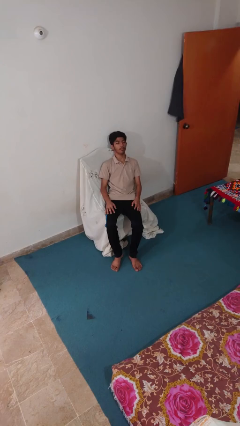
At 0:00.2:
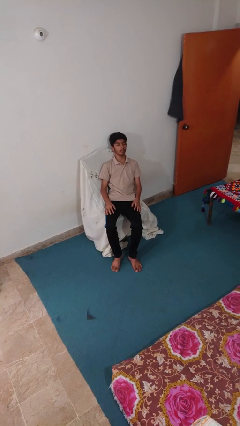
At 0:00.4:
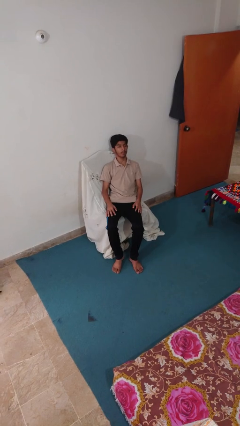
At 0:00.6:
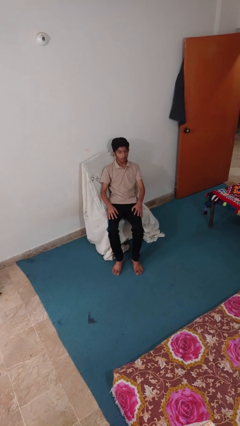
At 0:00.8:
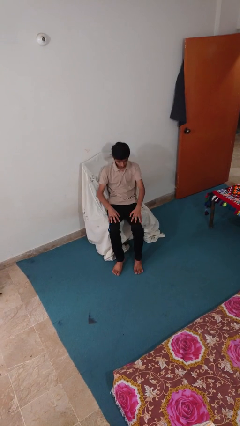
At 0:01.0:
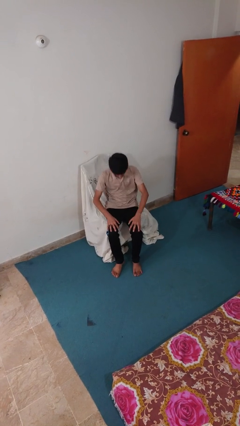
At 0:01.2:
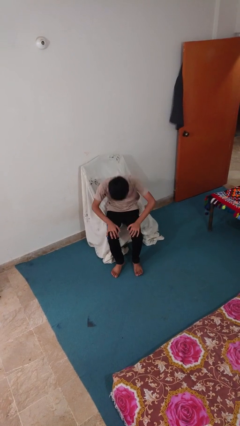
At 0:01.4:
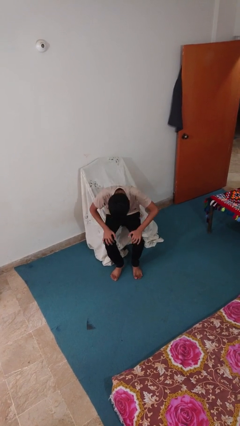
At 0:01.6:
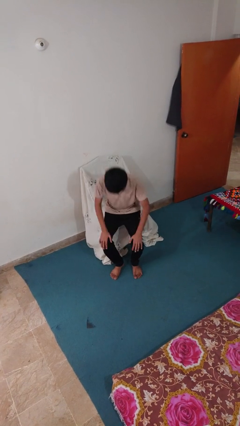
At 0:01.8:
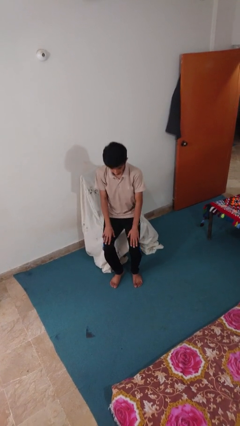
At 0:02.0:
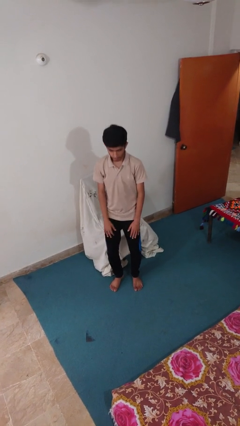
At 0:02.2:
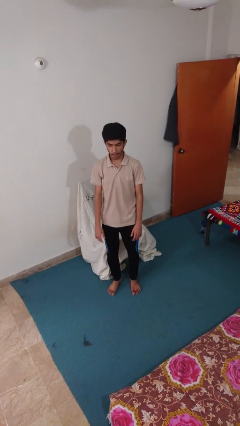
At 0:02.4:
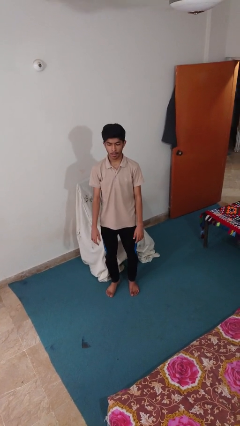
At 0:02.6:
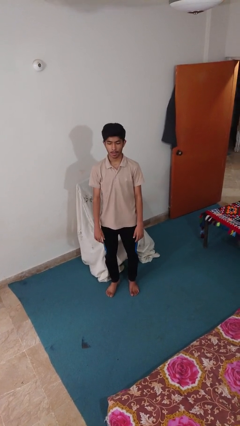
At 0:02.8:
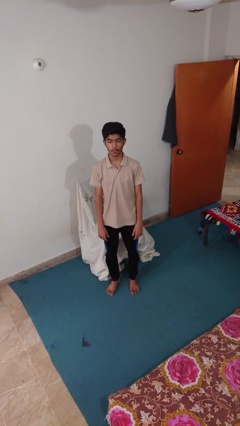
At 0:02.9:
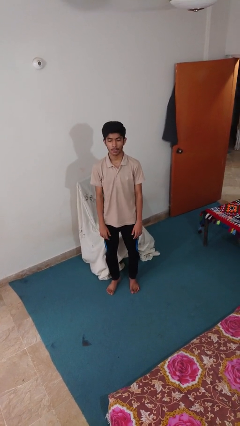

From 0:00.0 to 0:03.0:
person stands up

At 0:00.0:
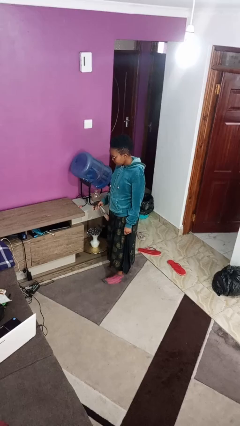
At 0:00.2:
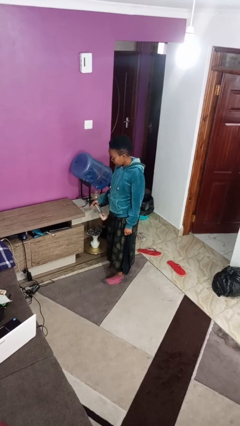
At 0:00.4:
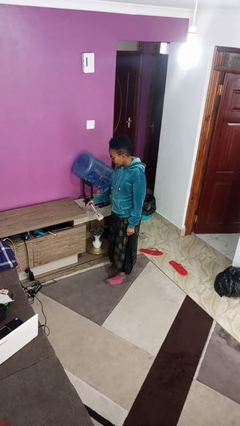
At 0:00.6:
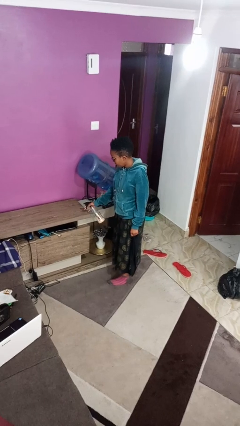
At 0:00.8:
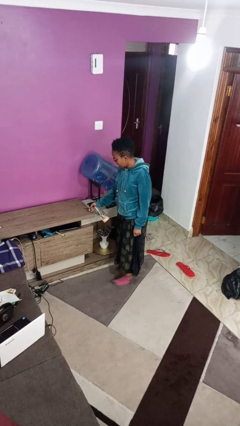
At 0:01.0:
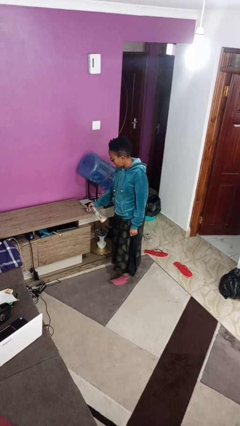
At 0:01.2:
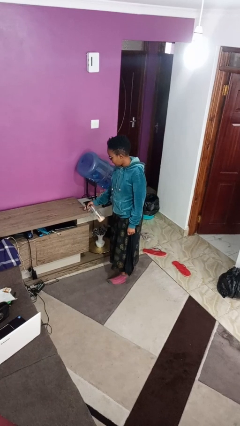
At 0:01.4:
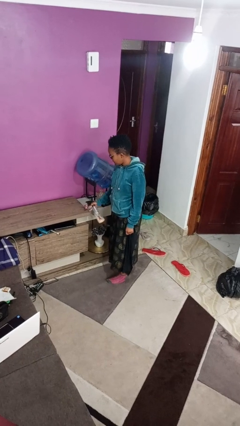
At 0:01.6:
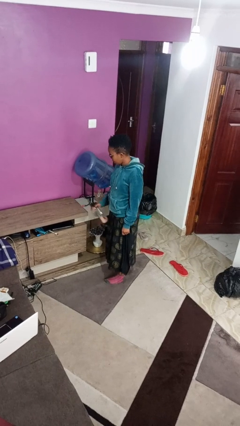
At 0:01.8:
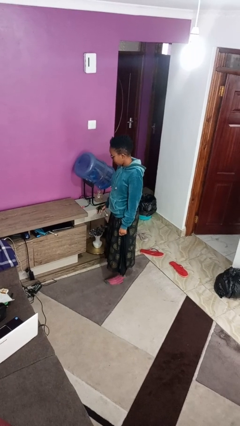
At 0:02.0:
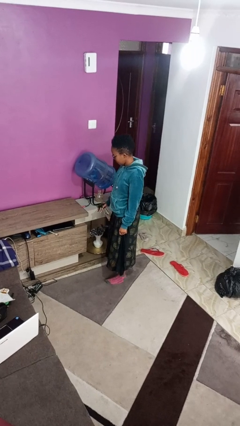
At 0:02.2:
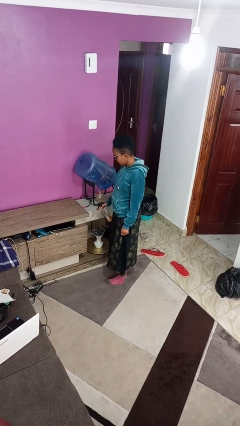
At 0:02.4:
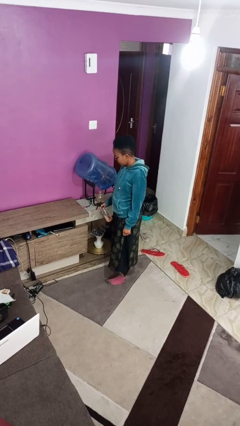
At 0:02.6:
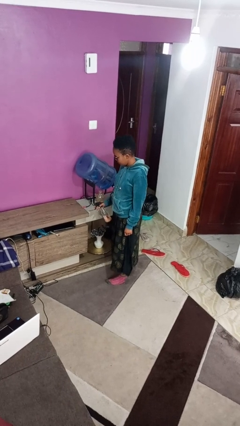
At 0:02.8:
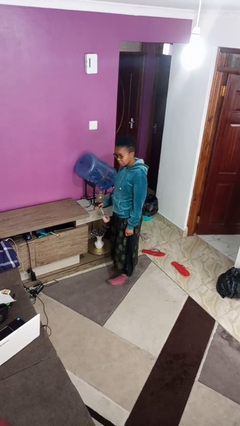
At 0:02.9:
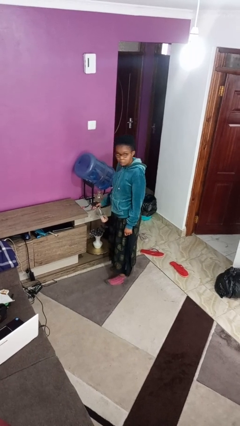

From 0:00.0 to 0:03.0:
person sprays from bottle

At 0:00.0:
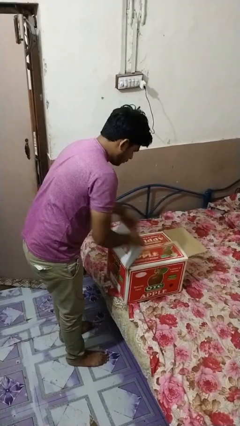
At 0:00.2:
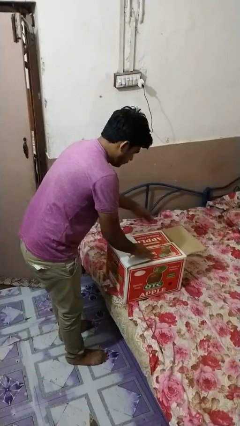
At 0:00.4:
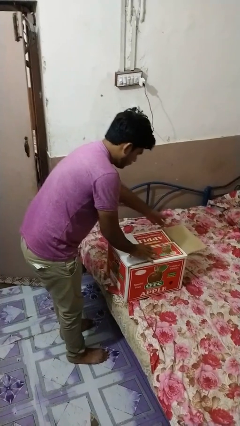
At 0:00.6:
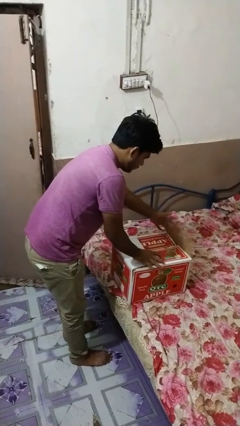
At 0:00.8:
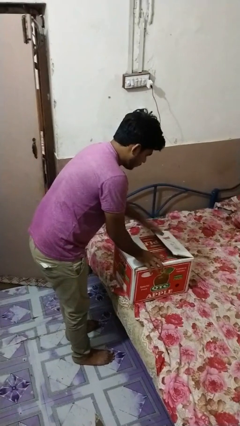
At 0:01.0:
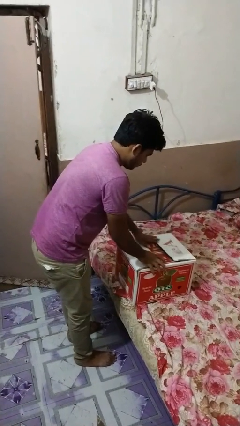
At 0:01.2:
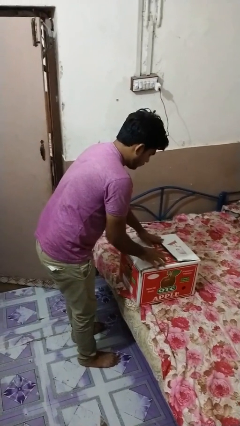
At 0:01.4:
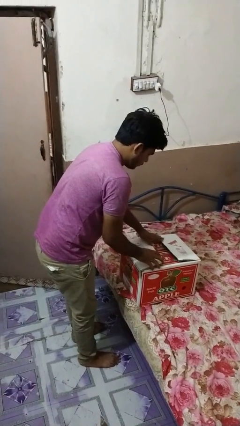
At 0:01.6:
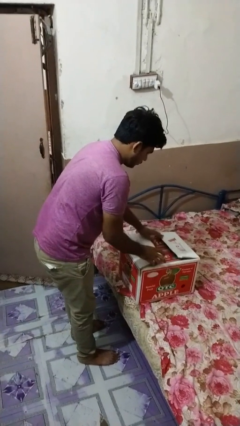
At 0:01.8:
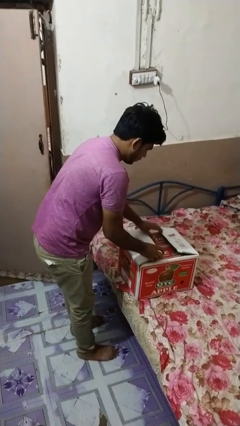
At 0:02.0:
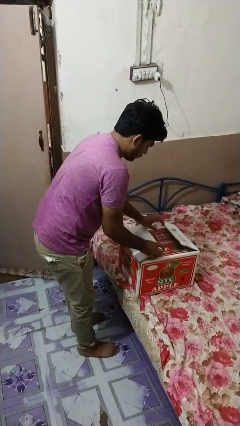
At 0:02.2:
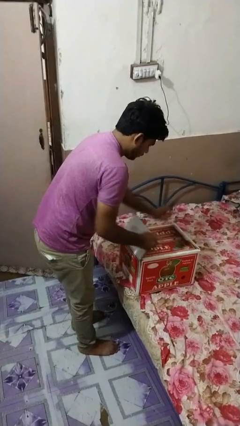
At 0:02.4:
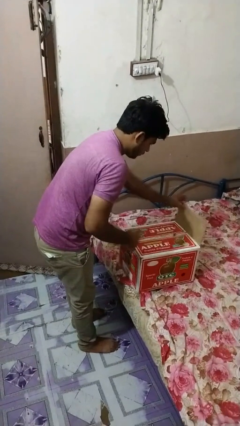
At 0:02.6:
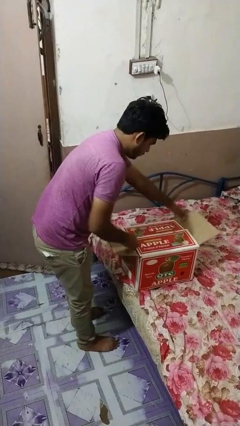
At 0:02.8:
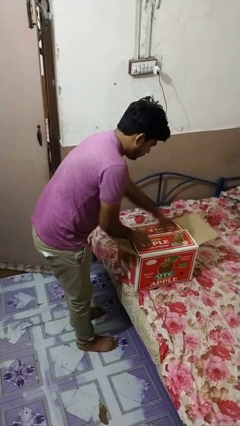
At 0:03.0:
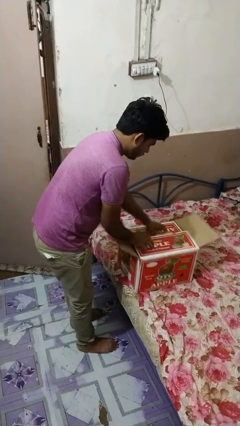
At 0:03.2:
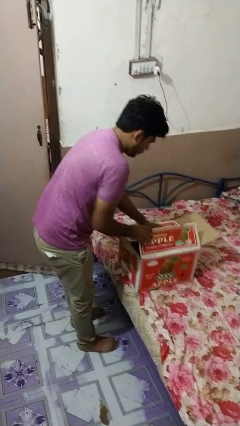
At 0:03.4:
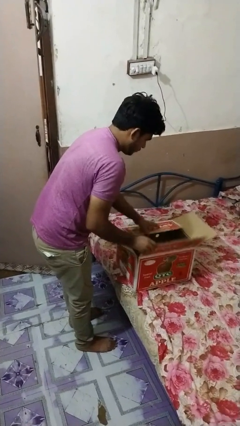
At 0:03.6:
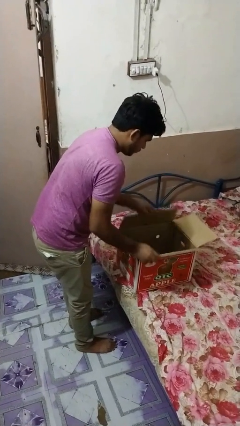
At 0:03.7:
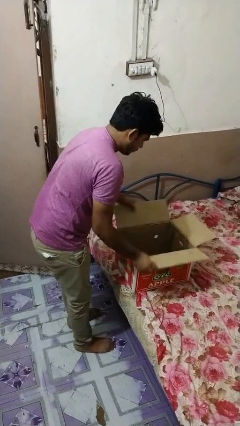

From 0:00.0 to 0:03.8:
person closes box

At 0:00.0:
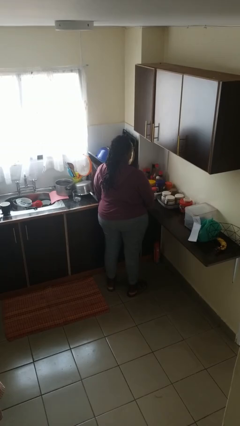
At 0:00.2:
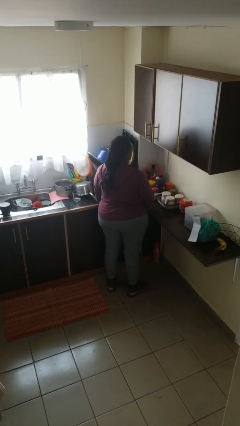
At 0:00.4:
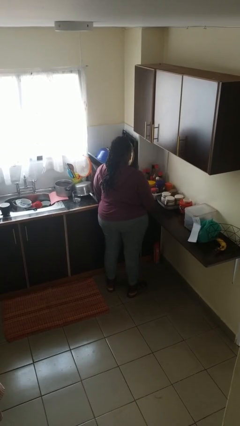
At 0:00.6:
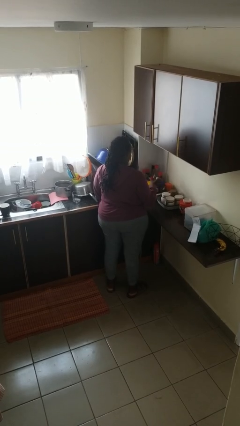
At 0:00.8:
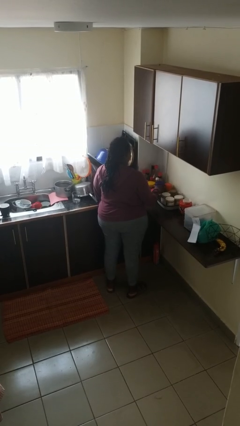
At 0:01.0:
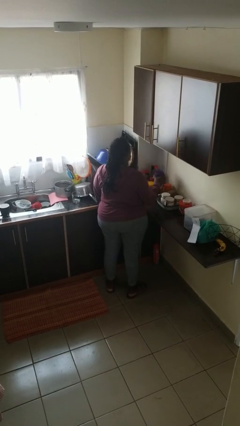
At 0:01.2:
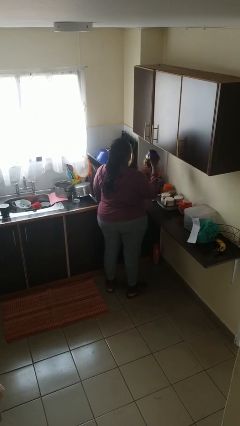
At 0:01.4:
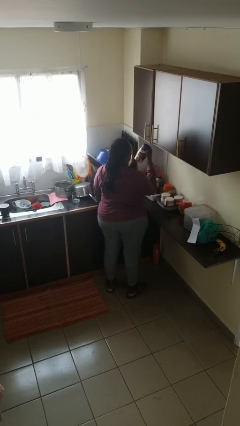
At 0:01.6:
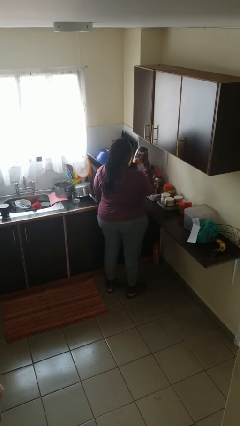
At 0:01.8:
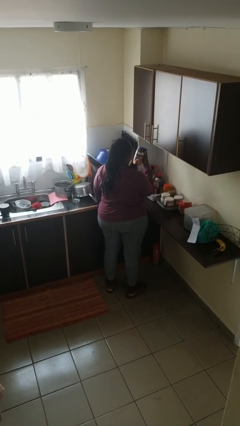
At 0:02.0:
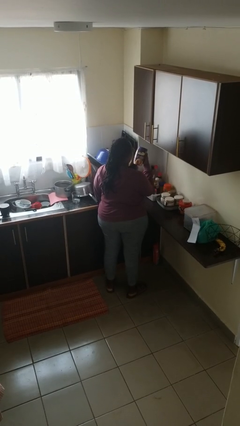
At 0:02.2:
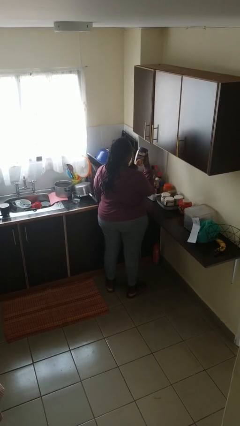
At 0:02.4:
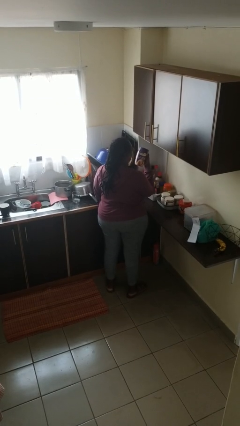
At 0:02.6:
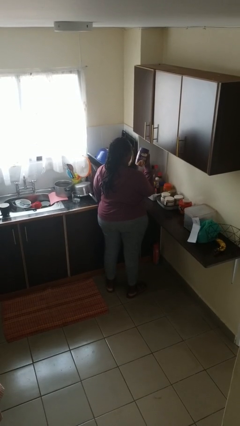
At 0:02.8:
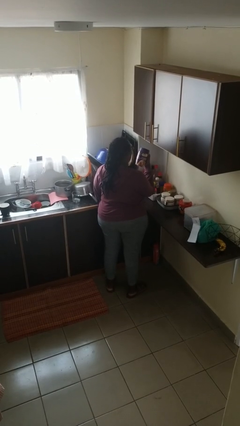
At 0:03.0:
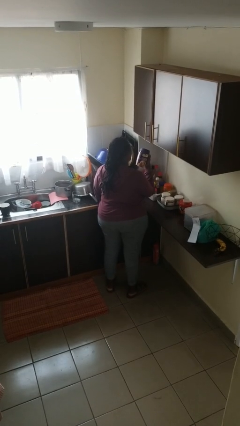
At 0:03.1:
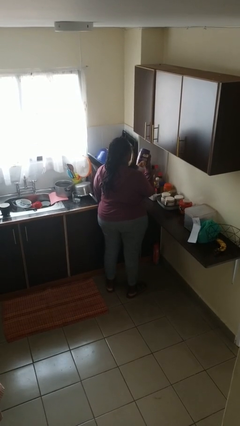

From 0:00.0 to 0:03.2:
person picks up object from countertop

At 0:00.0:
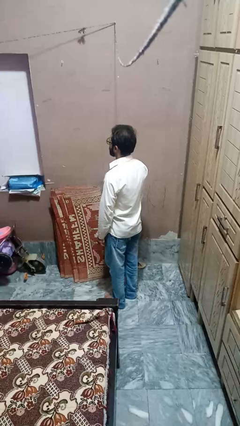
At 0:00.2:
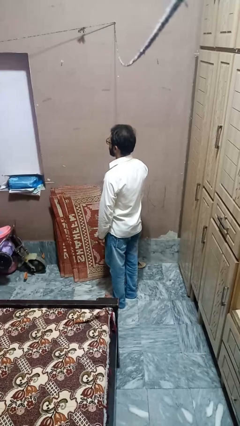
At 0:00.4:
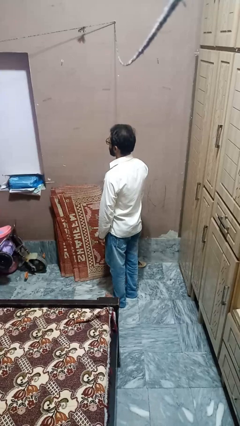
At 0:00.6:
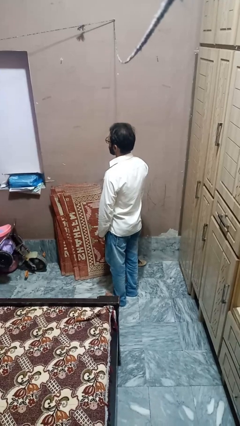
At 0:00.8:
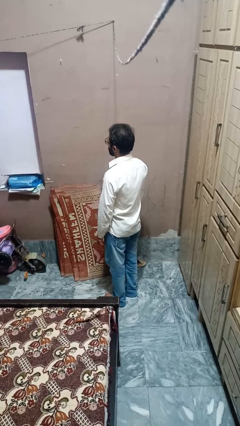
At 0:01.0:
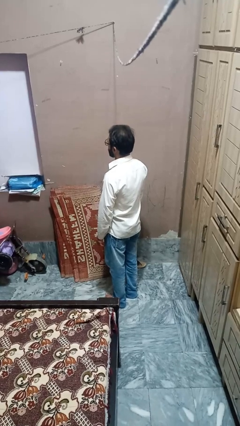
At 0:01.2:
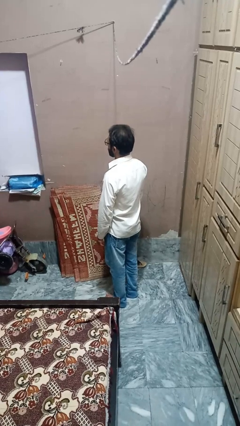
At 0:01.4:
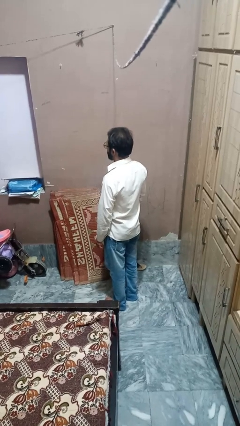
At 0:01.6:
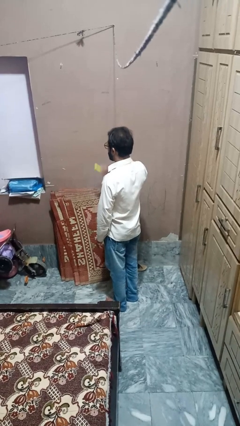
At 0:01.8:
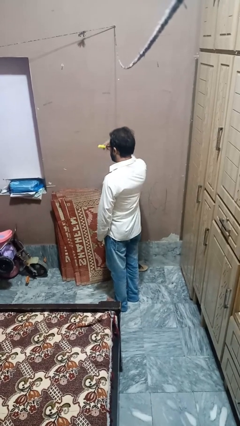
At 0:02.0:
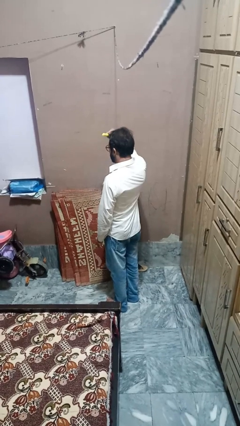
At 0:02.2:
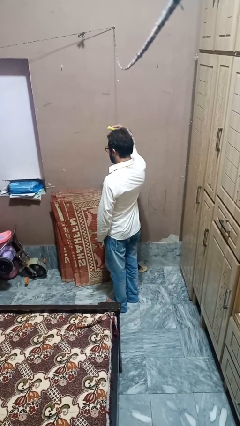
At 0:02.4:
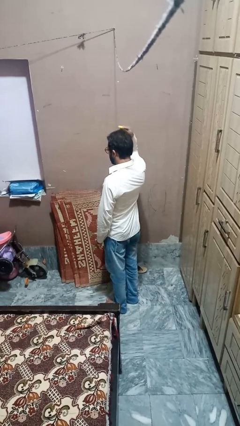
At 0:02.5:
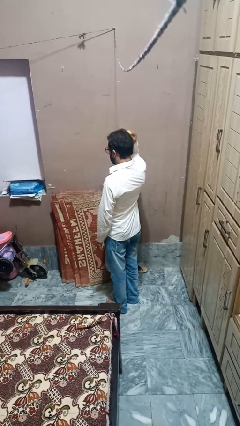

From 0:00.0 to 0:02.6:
person brushes hair

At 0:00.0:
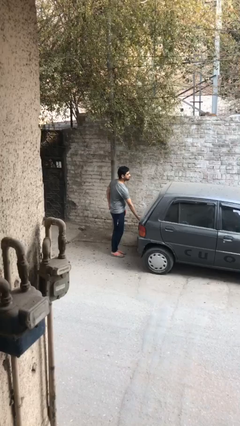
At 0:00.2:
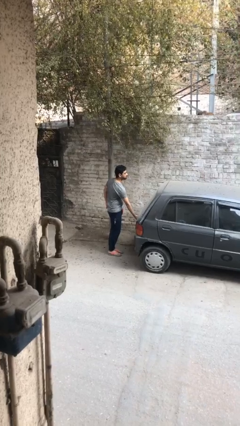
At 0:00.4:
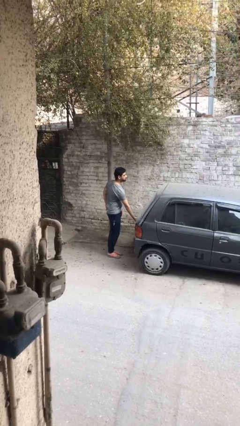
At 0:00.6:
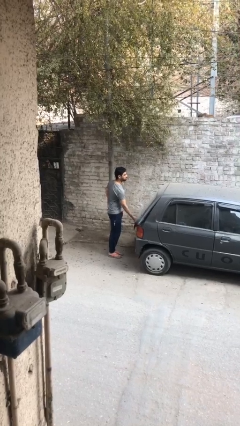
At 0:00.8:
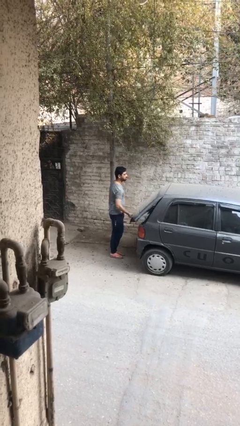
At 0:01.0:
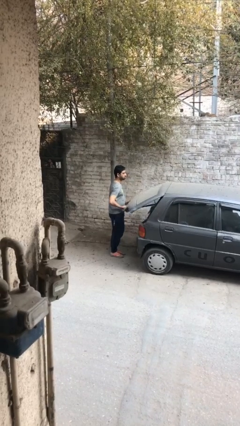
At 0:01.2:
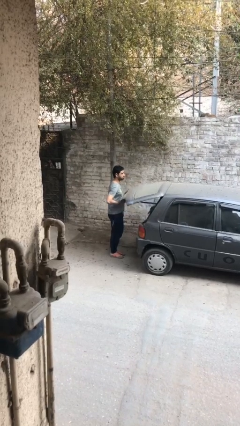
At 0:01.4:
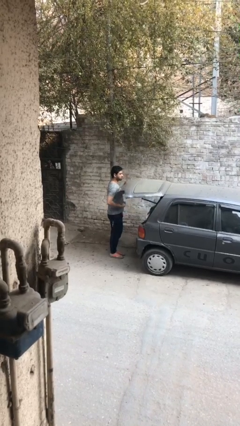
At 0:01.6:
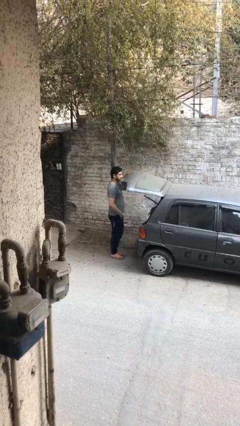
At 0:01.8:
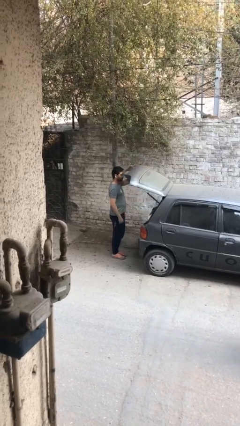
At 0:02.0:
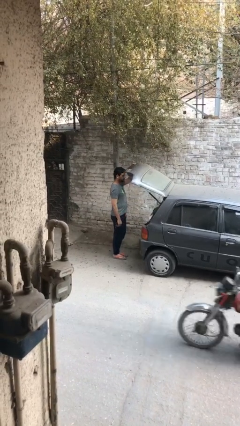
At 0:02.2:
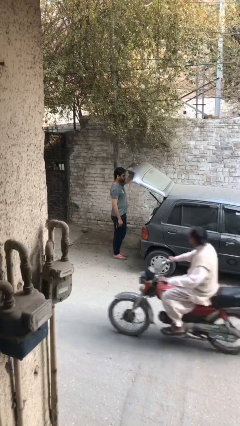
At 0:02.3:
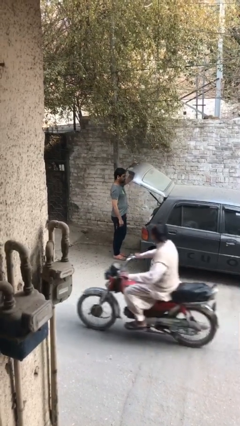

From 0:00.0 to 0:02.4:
person opens car trunk
